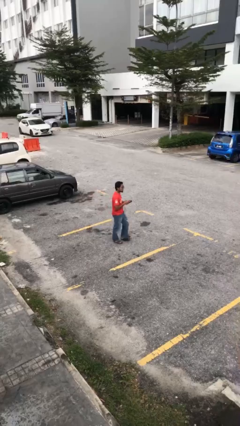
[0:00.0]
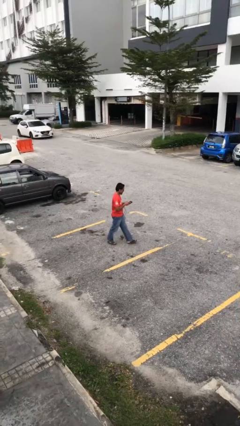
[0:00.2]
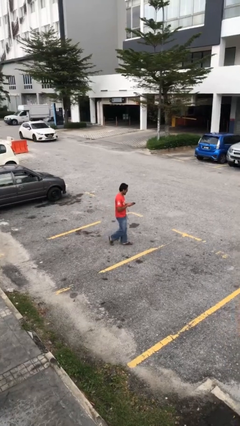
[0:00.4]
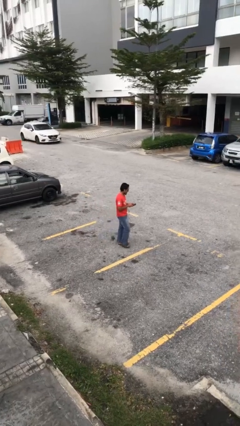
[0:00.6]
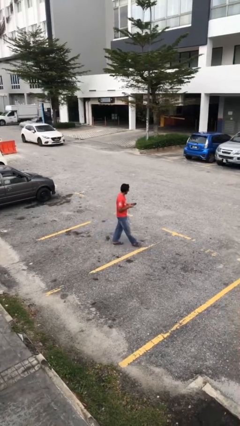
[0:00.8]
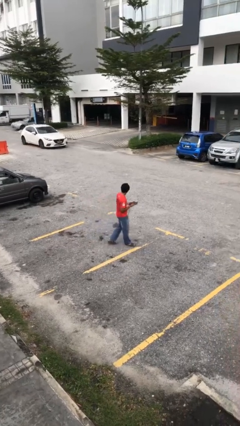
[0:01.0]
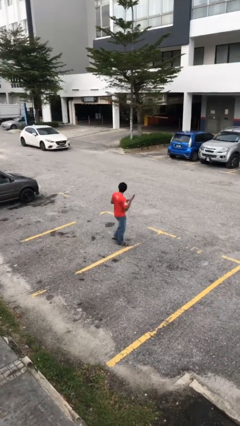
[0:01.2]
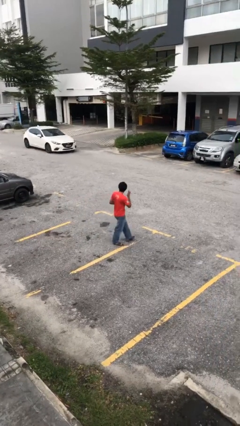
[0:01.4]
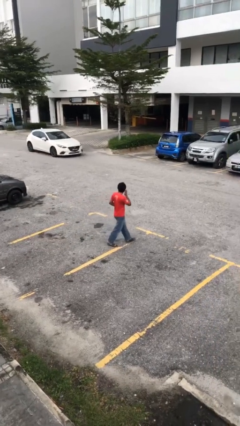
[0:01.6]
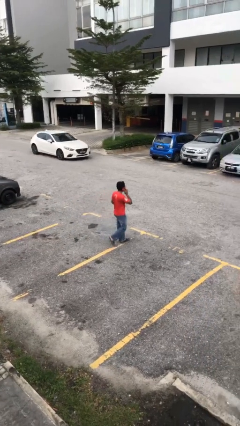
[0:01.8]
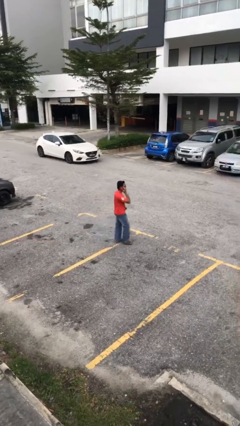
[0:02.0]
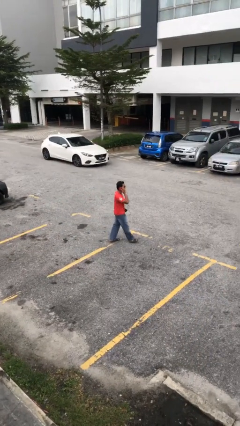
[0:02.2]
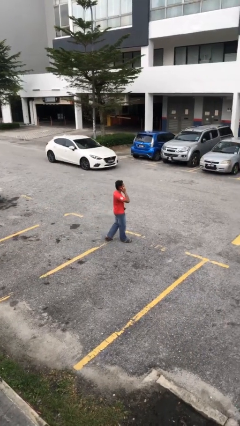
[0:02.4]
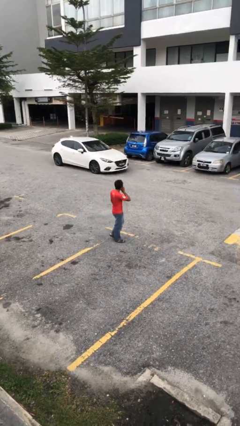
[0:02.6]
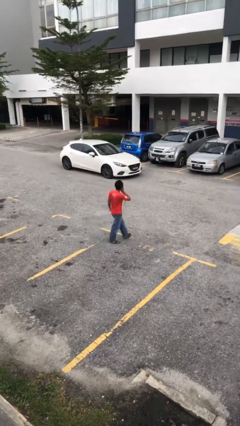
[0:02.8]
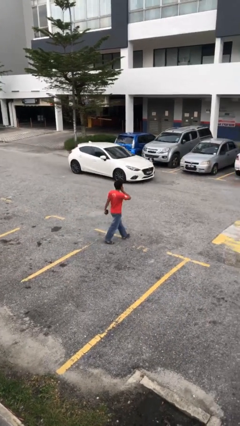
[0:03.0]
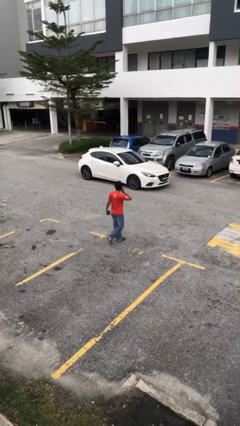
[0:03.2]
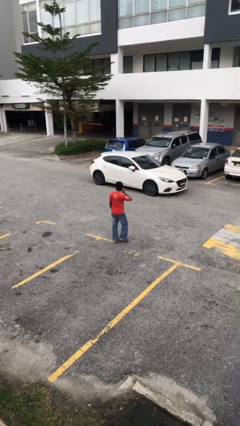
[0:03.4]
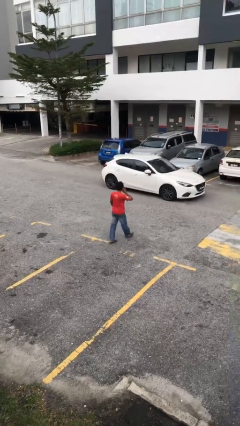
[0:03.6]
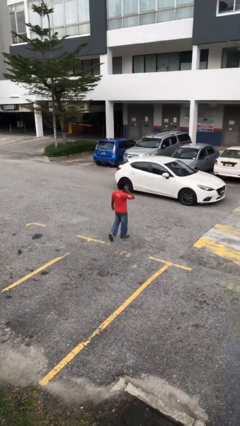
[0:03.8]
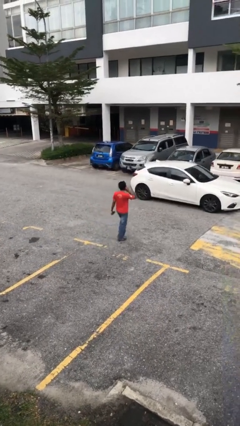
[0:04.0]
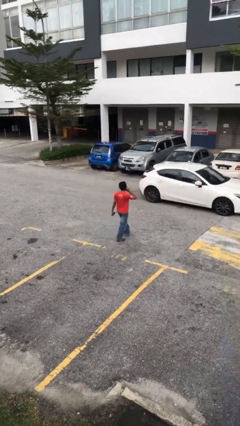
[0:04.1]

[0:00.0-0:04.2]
person talks on phone

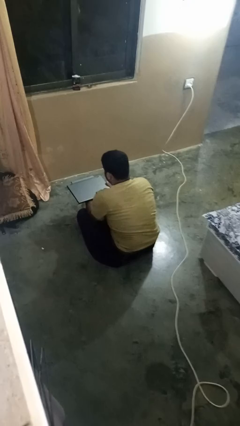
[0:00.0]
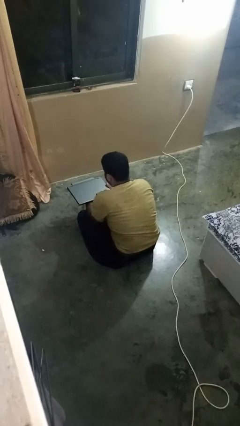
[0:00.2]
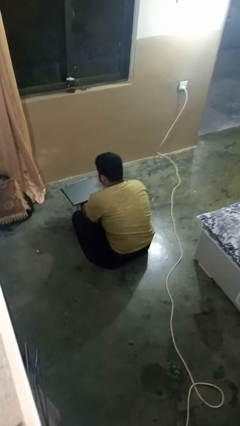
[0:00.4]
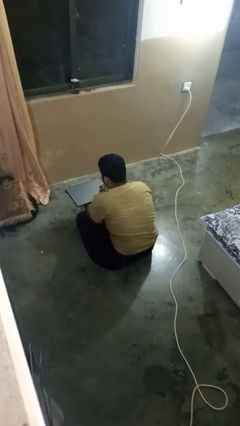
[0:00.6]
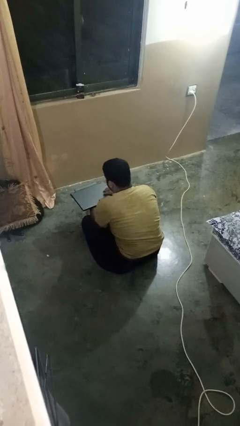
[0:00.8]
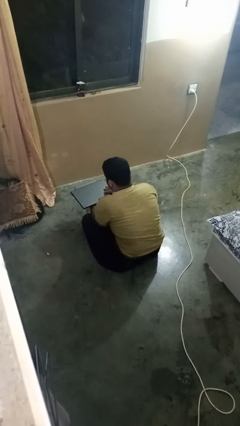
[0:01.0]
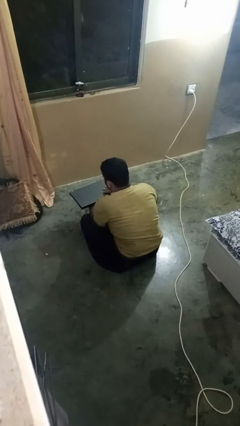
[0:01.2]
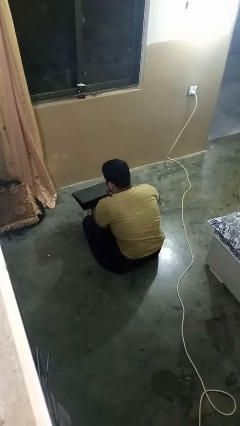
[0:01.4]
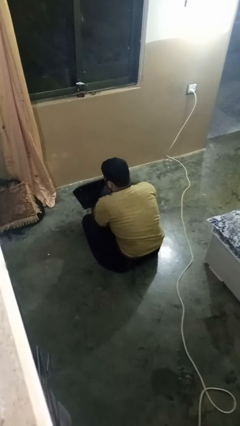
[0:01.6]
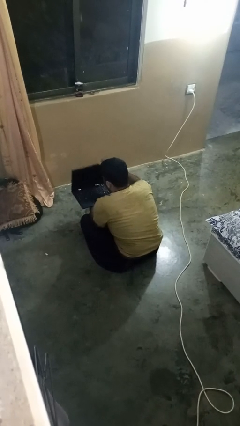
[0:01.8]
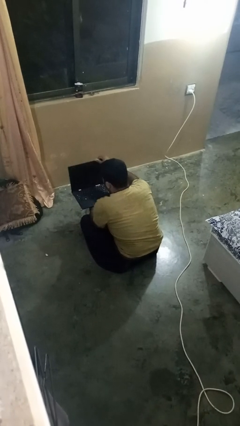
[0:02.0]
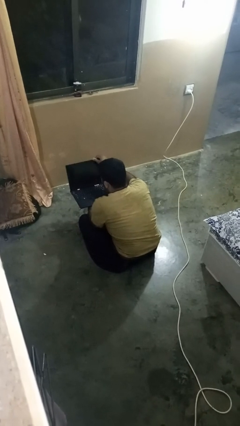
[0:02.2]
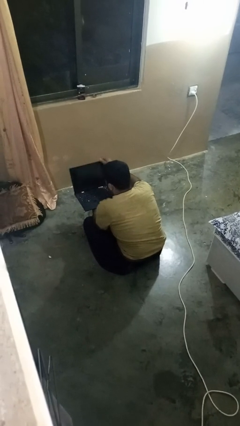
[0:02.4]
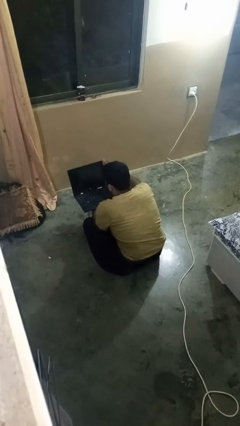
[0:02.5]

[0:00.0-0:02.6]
person opens laptop

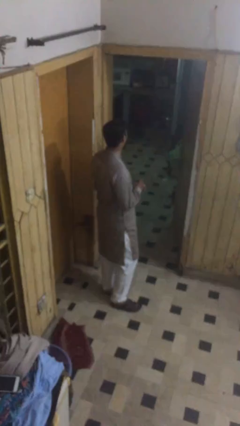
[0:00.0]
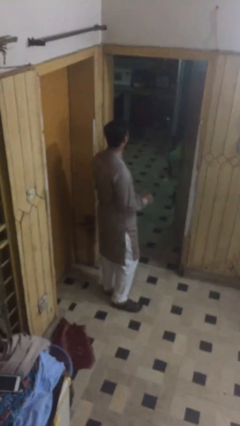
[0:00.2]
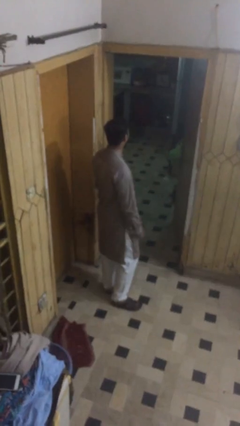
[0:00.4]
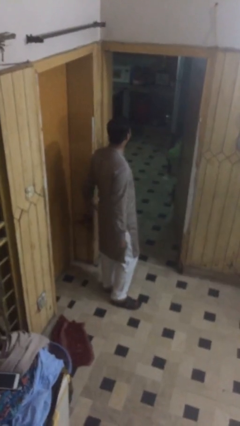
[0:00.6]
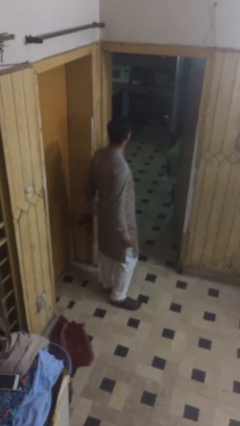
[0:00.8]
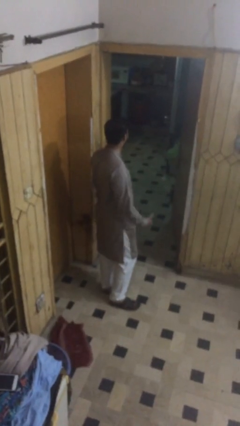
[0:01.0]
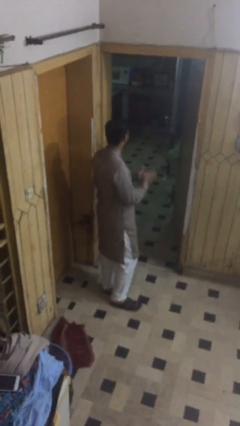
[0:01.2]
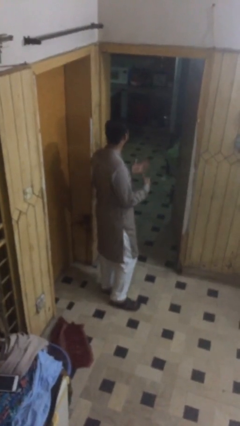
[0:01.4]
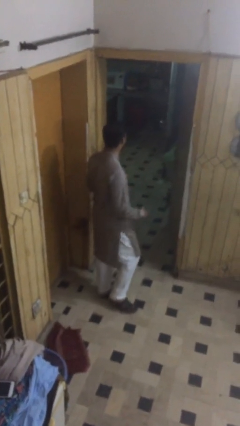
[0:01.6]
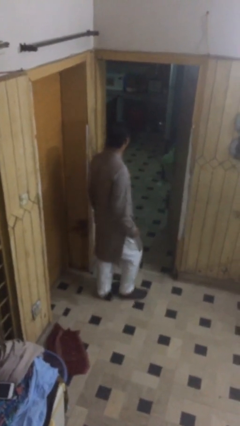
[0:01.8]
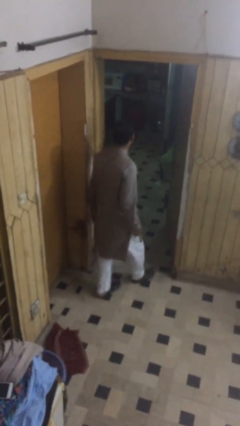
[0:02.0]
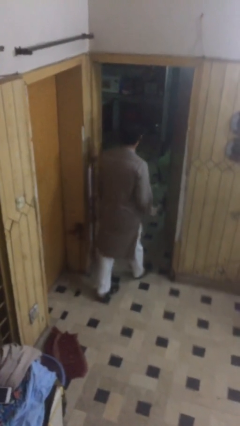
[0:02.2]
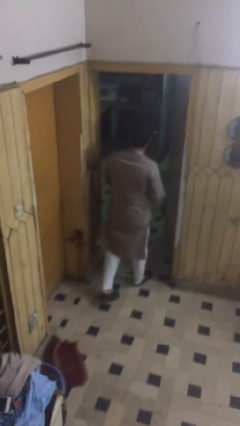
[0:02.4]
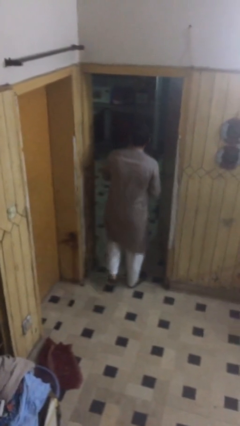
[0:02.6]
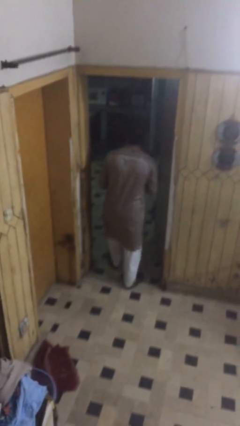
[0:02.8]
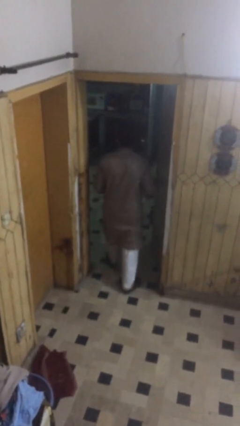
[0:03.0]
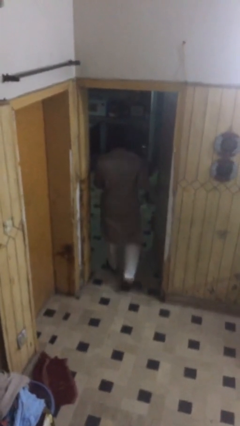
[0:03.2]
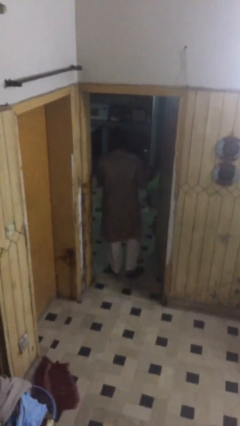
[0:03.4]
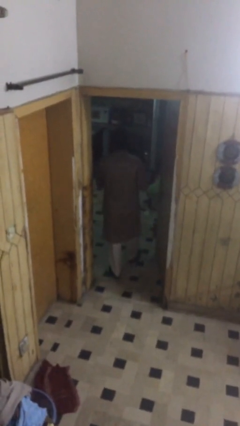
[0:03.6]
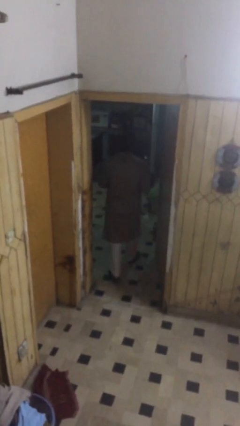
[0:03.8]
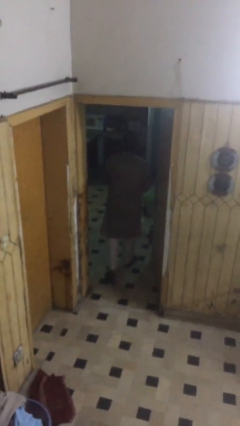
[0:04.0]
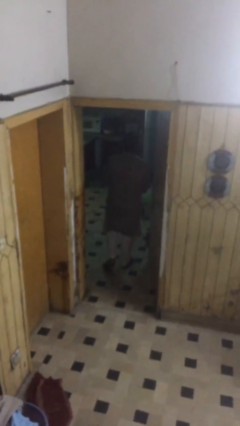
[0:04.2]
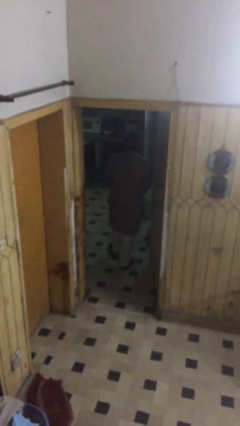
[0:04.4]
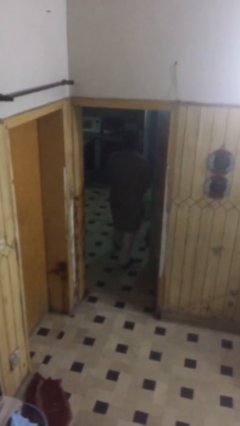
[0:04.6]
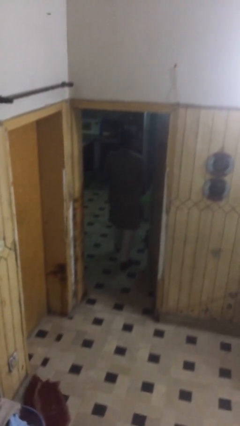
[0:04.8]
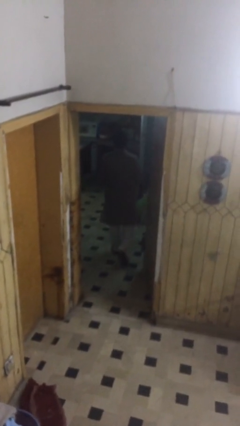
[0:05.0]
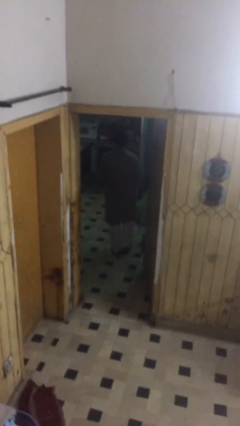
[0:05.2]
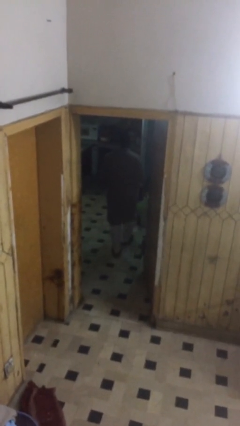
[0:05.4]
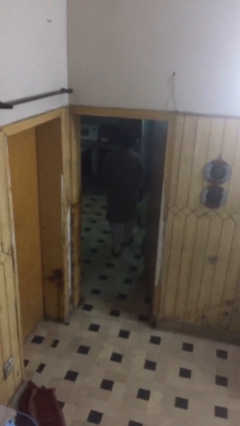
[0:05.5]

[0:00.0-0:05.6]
person exits scene through structure

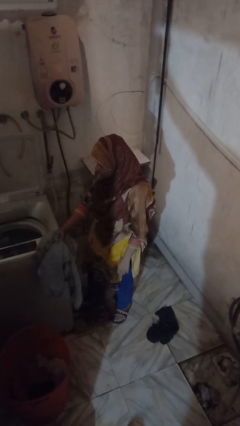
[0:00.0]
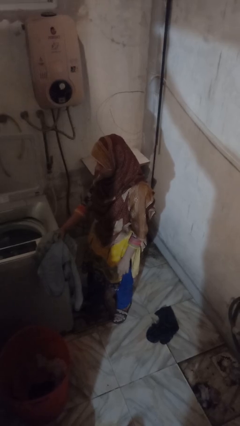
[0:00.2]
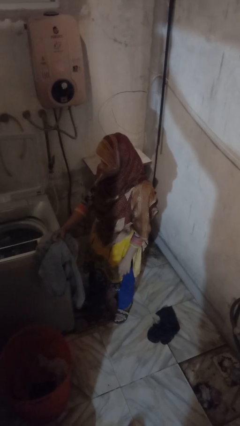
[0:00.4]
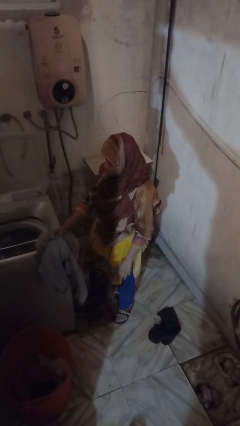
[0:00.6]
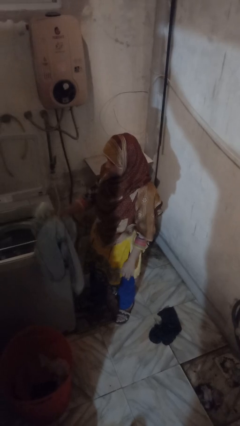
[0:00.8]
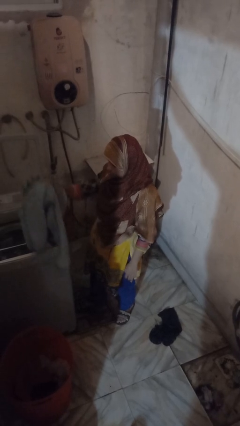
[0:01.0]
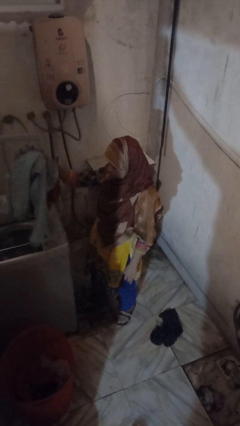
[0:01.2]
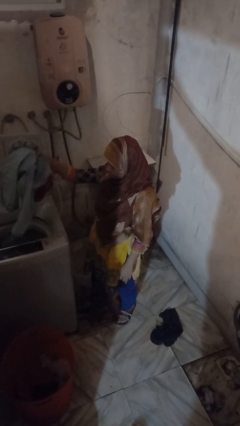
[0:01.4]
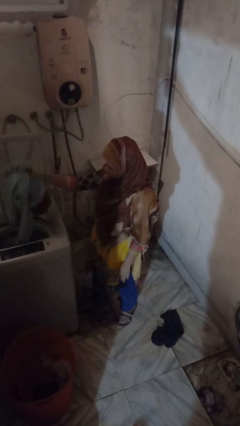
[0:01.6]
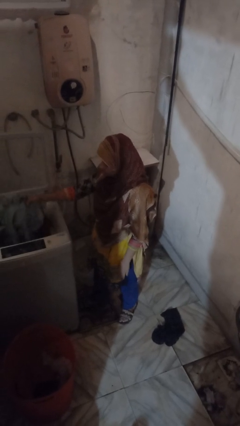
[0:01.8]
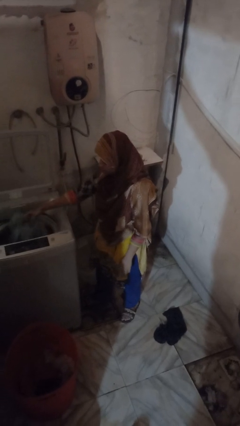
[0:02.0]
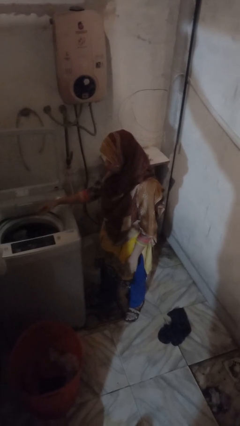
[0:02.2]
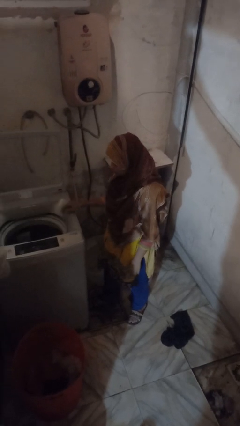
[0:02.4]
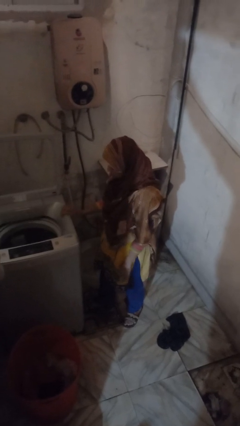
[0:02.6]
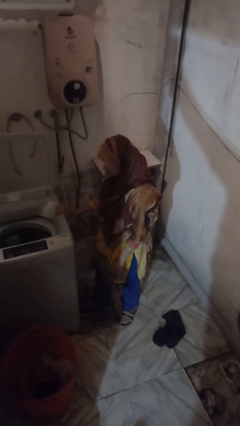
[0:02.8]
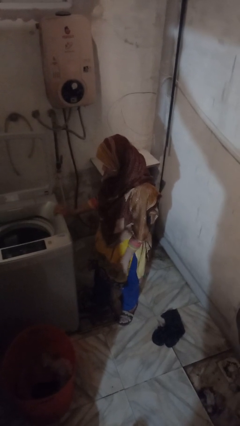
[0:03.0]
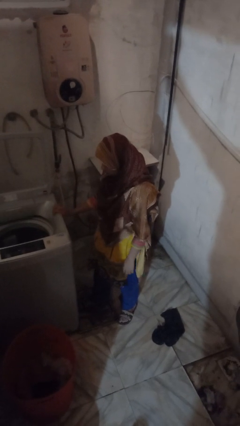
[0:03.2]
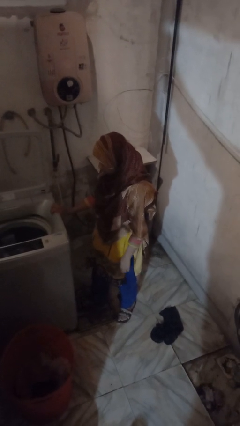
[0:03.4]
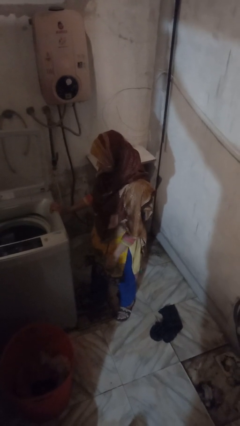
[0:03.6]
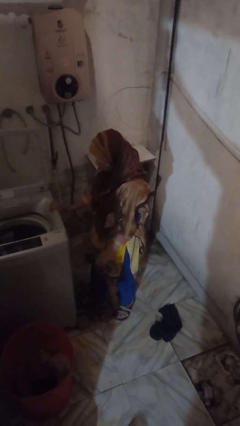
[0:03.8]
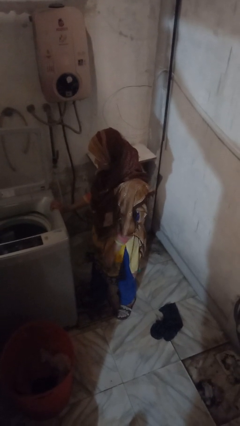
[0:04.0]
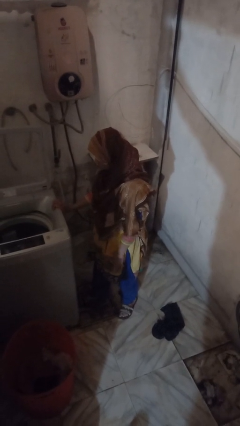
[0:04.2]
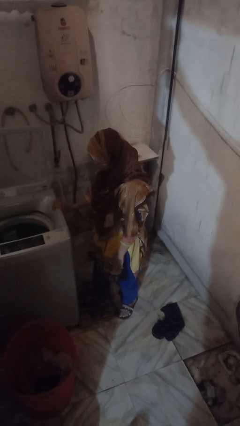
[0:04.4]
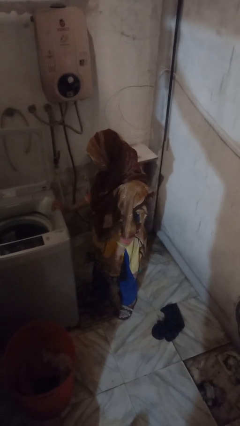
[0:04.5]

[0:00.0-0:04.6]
person loads dryer

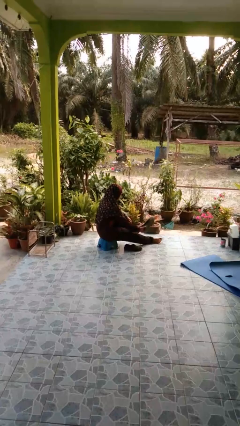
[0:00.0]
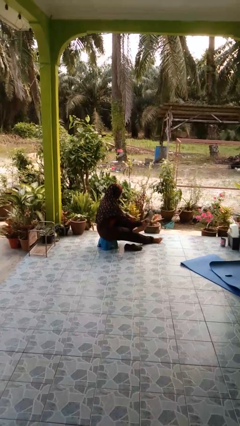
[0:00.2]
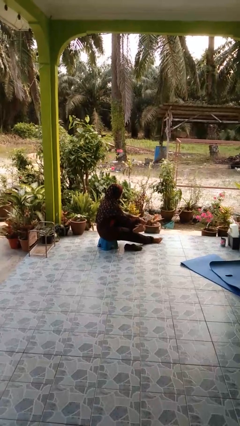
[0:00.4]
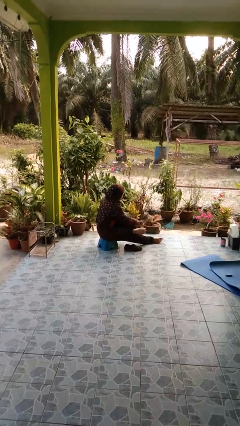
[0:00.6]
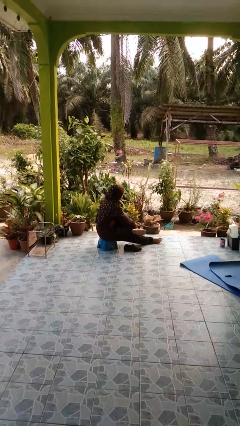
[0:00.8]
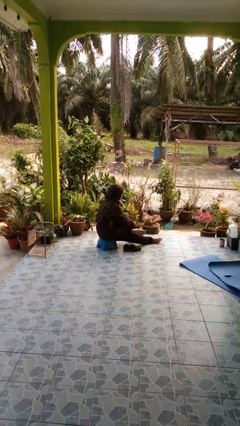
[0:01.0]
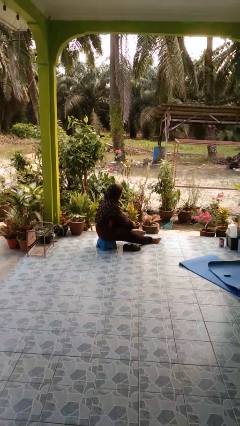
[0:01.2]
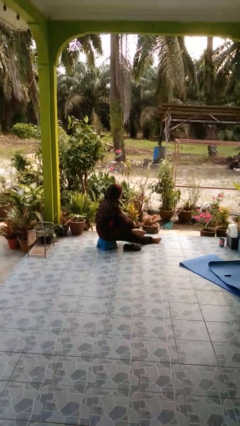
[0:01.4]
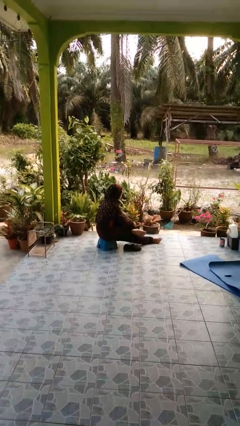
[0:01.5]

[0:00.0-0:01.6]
person takes off shoes
